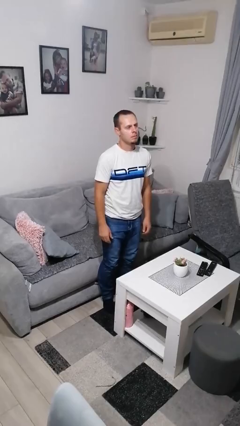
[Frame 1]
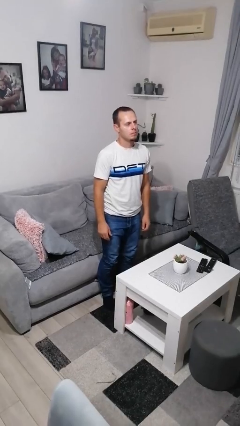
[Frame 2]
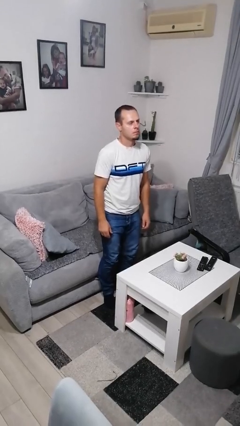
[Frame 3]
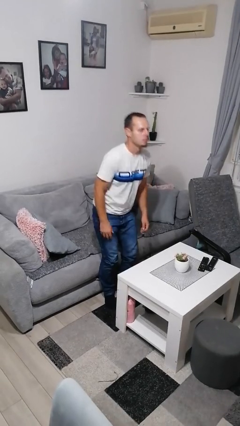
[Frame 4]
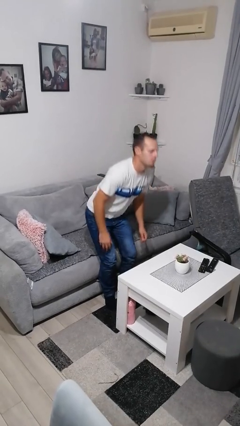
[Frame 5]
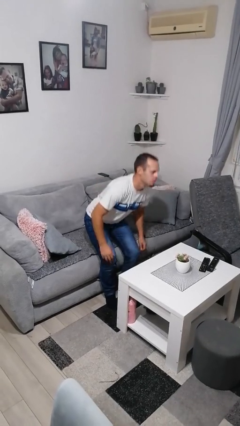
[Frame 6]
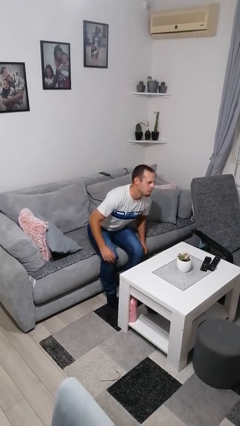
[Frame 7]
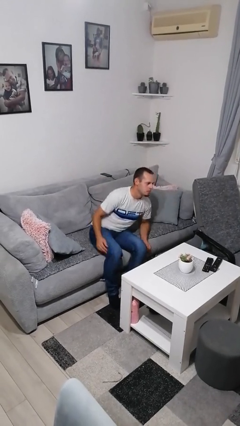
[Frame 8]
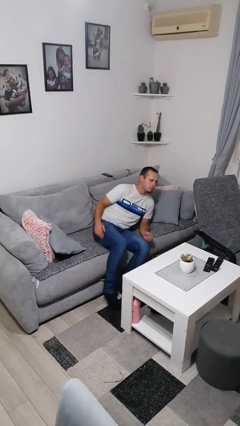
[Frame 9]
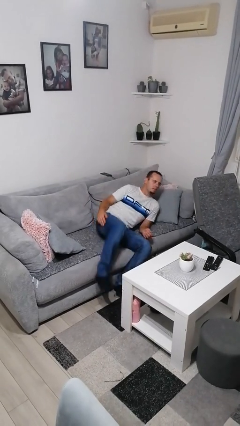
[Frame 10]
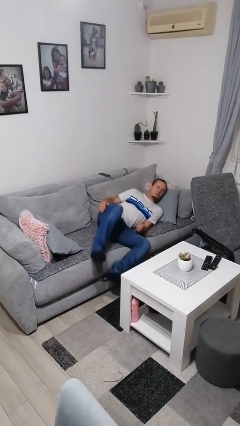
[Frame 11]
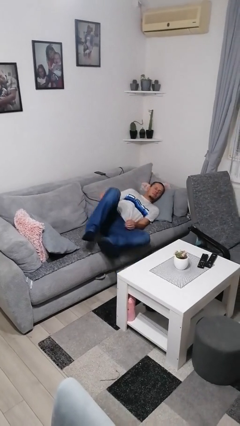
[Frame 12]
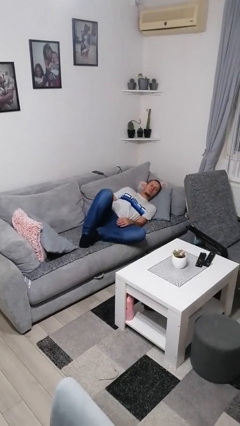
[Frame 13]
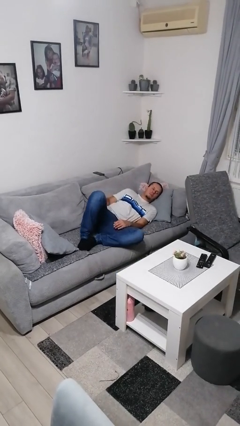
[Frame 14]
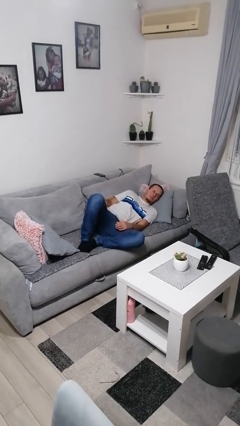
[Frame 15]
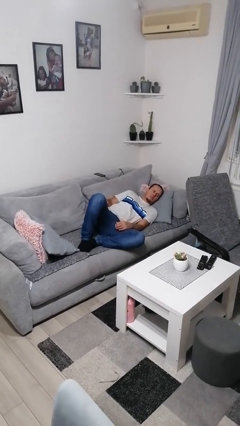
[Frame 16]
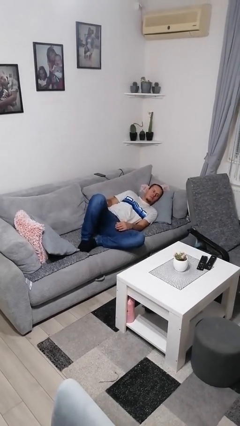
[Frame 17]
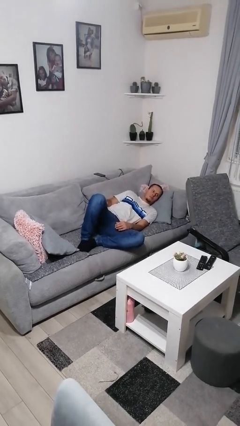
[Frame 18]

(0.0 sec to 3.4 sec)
person lies down on couch

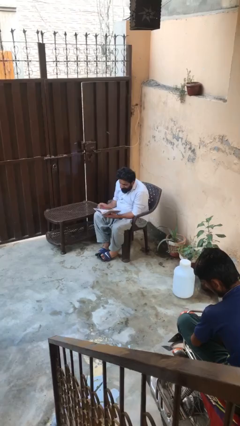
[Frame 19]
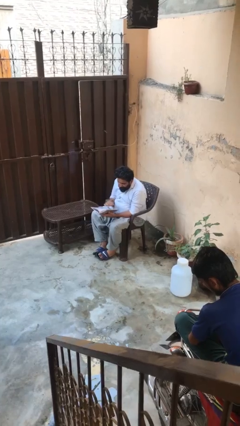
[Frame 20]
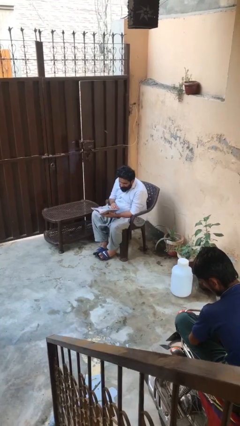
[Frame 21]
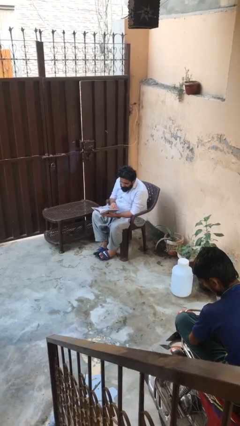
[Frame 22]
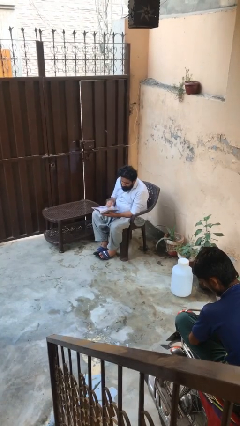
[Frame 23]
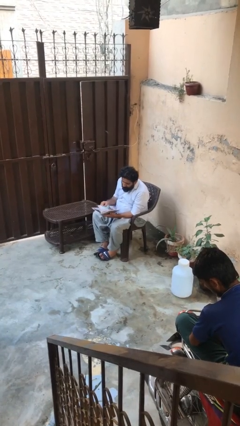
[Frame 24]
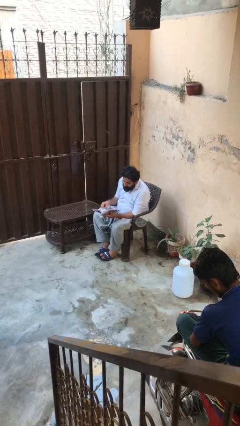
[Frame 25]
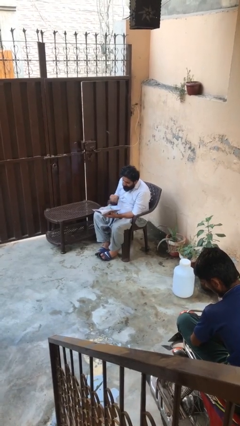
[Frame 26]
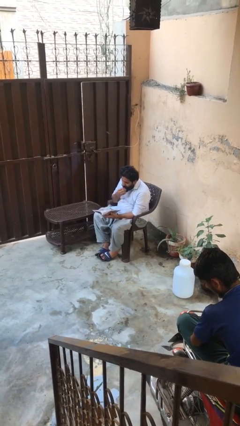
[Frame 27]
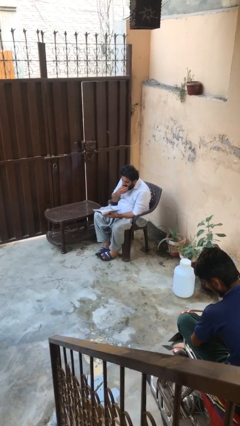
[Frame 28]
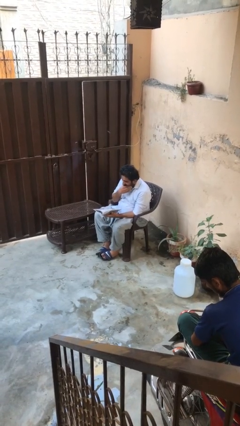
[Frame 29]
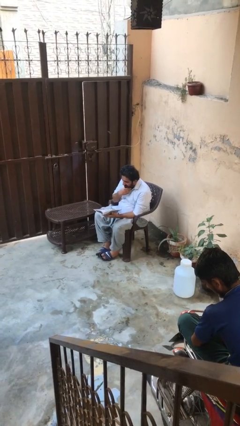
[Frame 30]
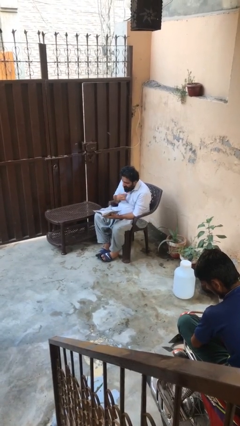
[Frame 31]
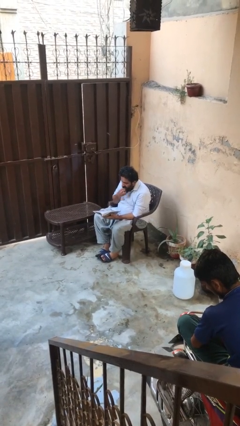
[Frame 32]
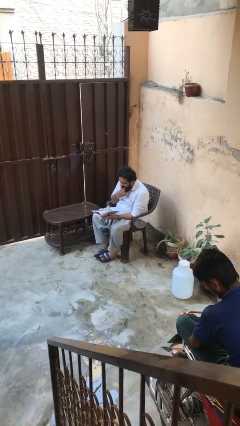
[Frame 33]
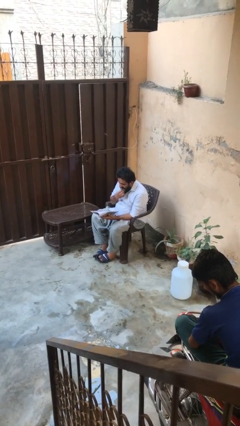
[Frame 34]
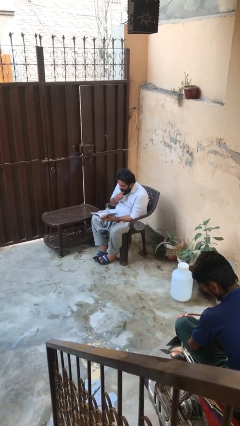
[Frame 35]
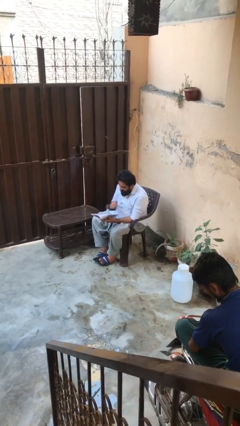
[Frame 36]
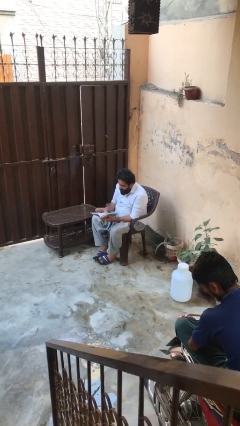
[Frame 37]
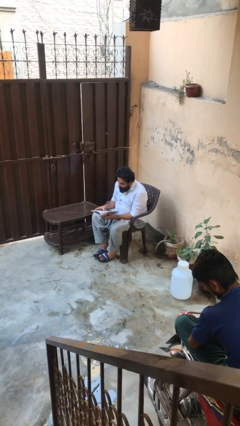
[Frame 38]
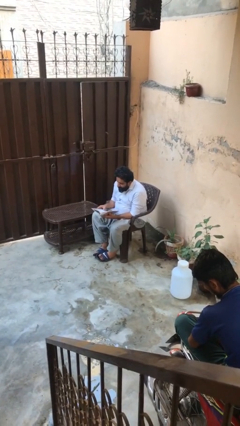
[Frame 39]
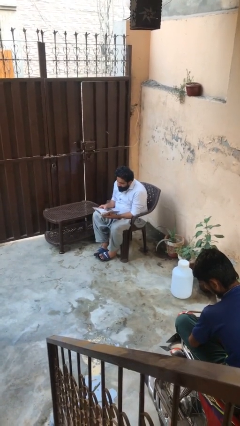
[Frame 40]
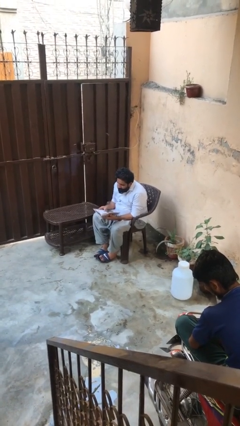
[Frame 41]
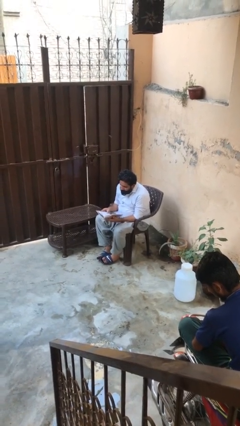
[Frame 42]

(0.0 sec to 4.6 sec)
person reads document

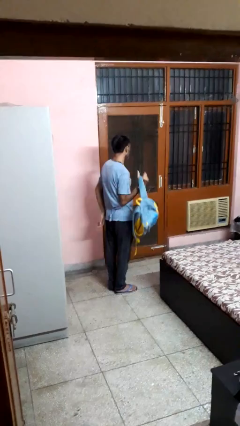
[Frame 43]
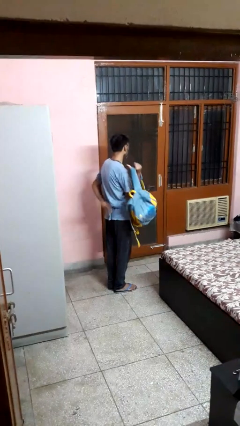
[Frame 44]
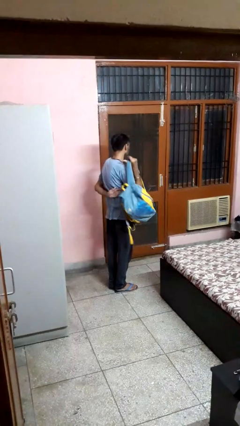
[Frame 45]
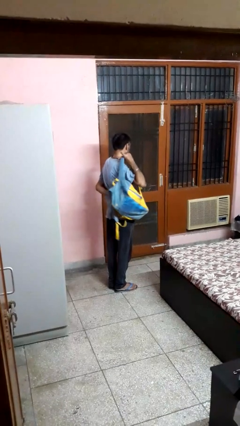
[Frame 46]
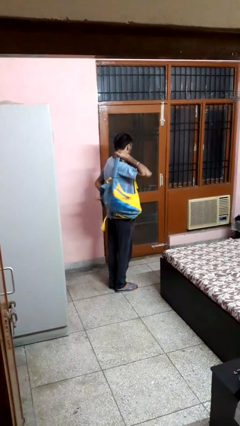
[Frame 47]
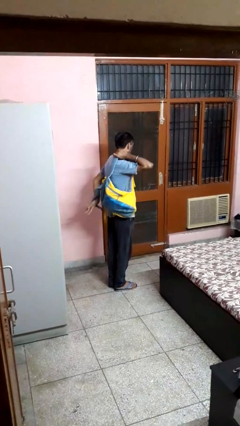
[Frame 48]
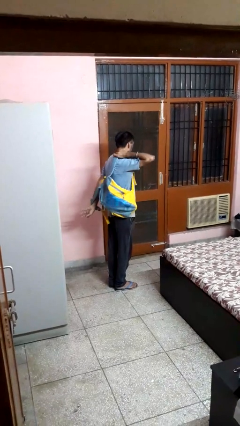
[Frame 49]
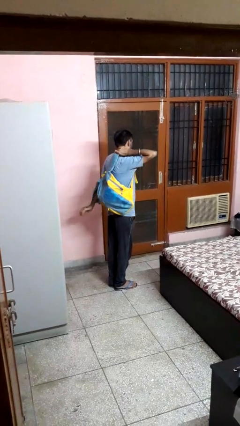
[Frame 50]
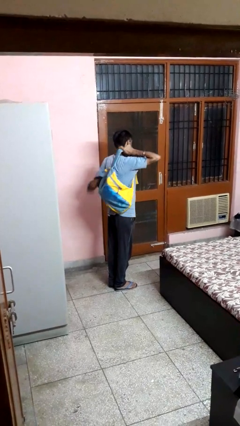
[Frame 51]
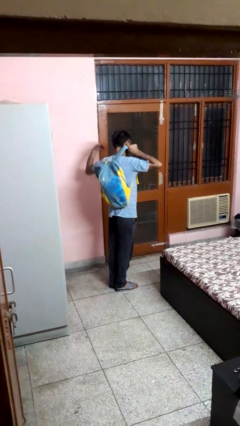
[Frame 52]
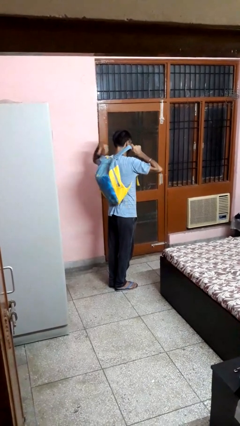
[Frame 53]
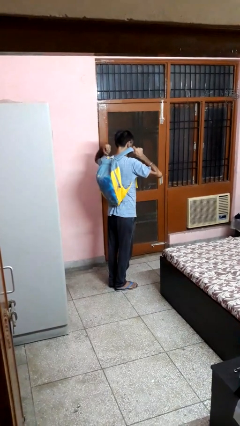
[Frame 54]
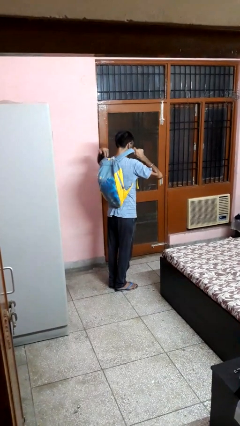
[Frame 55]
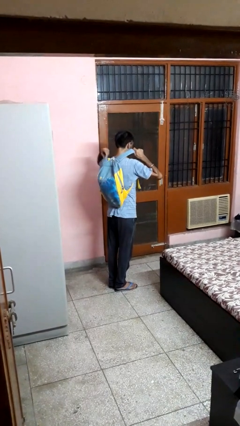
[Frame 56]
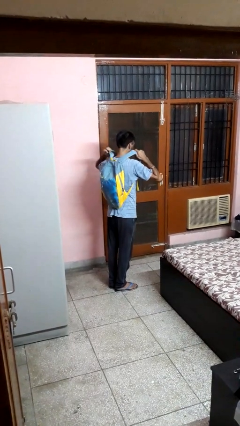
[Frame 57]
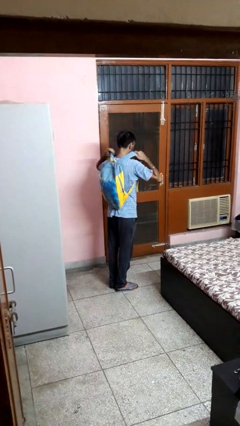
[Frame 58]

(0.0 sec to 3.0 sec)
person puts on backpack

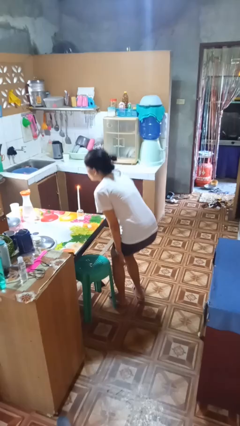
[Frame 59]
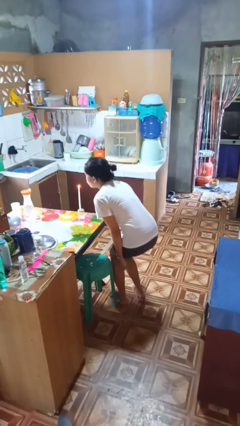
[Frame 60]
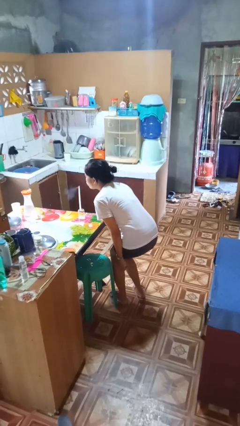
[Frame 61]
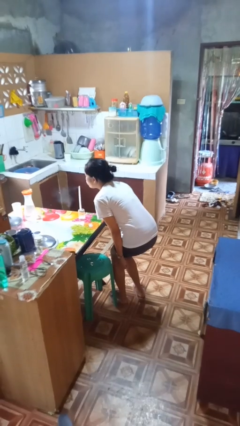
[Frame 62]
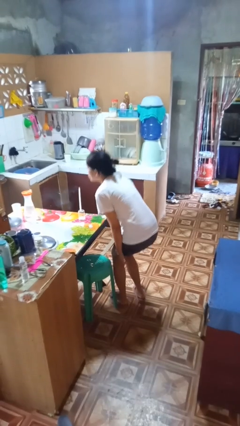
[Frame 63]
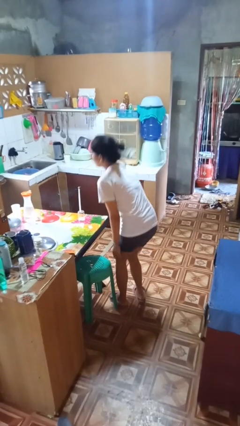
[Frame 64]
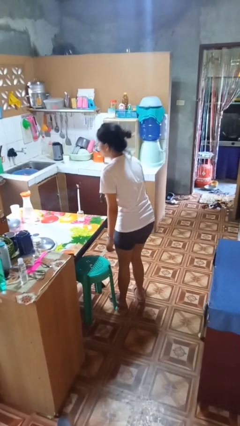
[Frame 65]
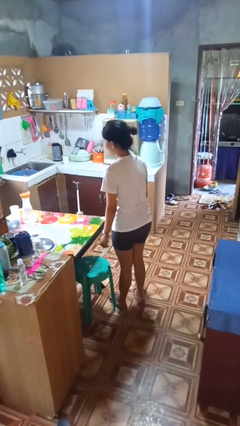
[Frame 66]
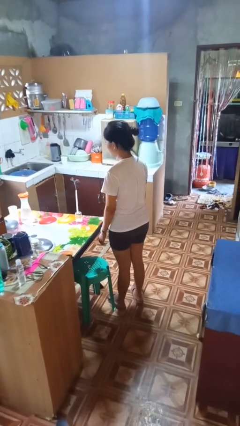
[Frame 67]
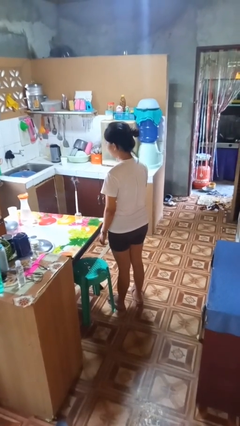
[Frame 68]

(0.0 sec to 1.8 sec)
person extinguishes candle

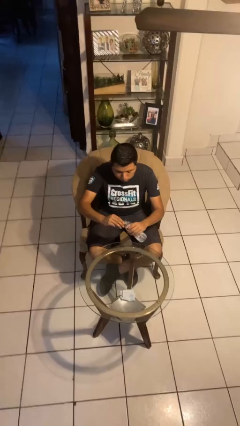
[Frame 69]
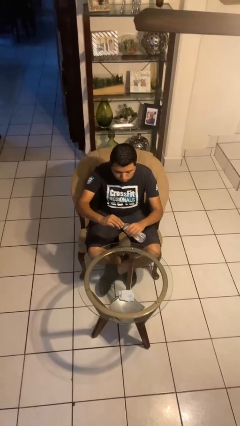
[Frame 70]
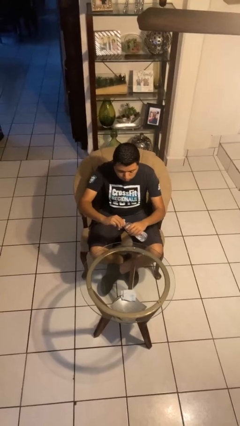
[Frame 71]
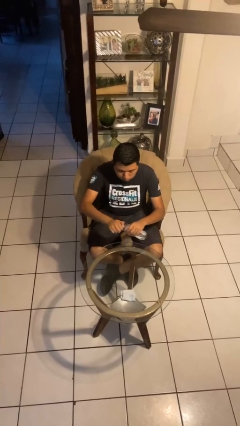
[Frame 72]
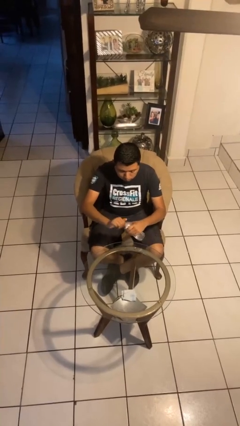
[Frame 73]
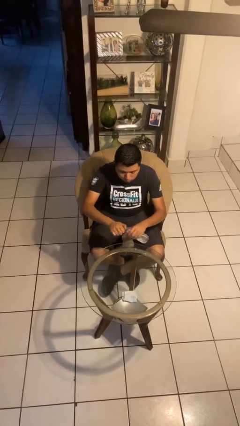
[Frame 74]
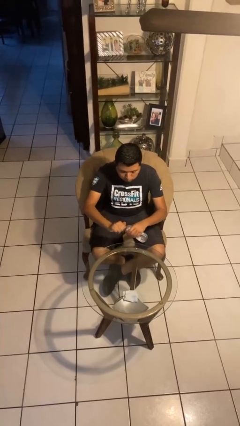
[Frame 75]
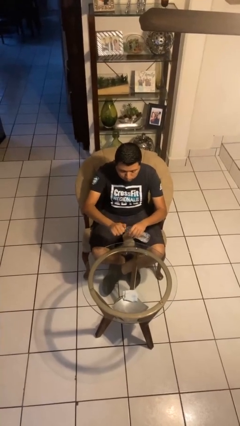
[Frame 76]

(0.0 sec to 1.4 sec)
person screws lid to bottle

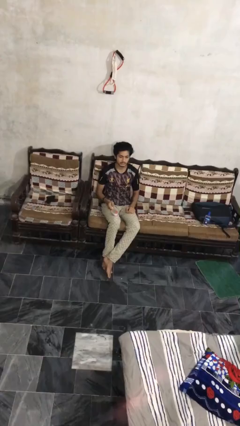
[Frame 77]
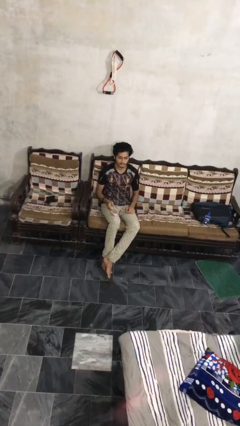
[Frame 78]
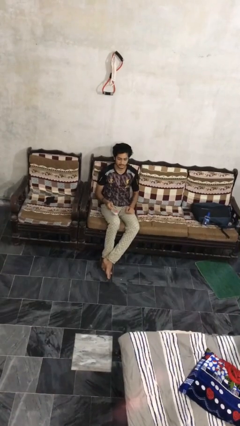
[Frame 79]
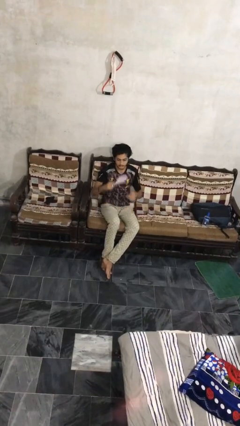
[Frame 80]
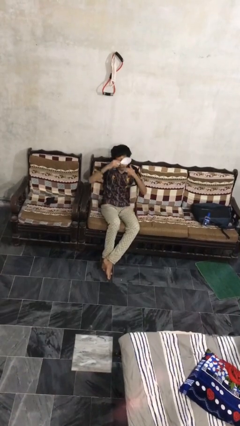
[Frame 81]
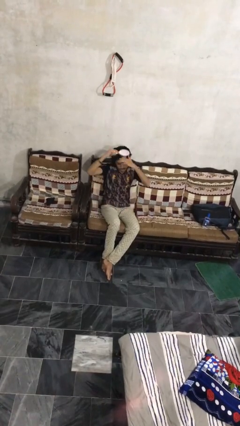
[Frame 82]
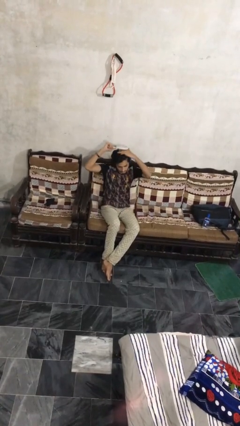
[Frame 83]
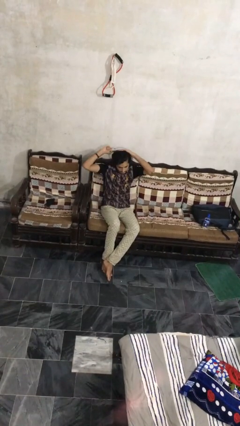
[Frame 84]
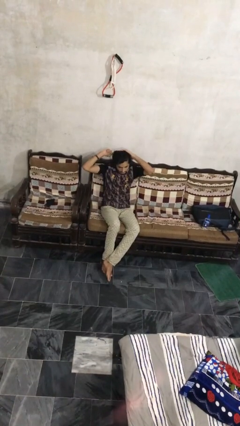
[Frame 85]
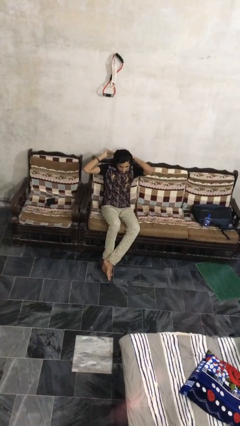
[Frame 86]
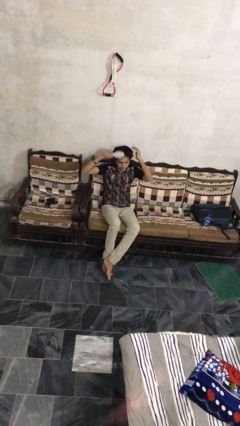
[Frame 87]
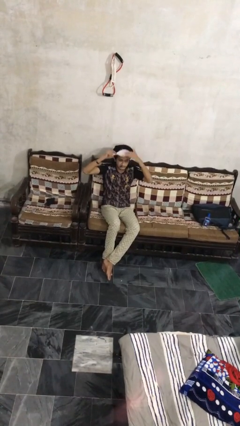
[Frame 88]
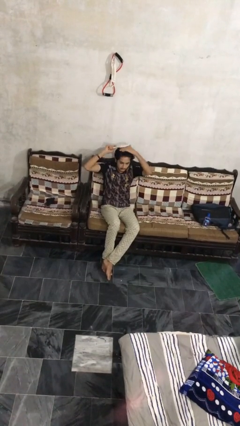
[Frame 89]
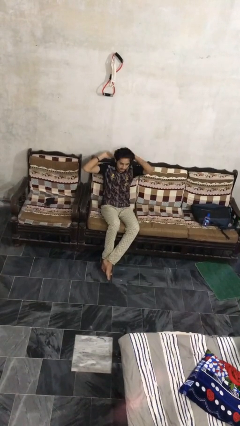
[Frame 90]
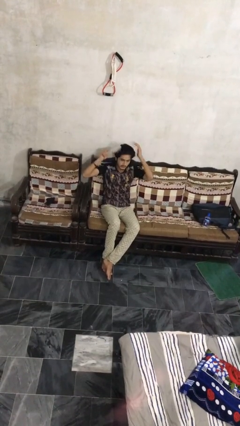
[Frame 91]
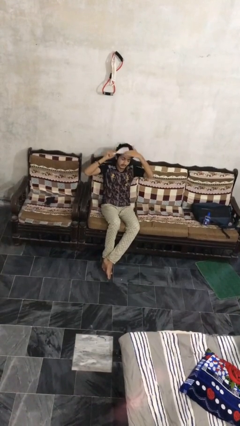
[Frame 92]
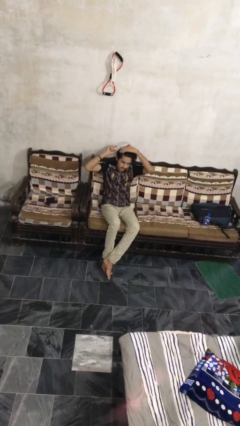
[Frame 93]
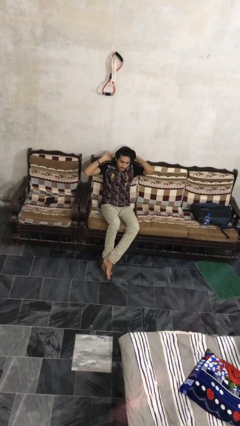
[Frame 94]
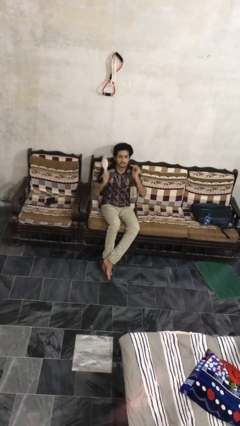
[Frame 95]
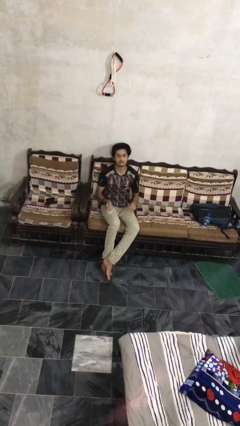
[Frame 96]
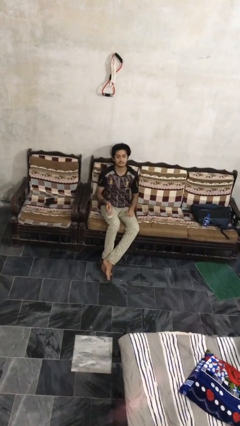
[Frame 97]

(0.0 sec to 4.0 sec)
person brushes hair
